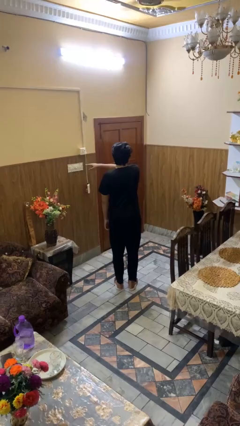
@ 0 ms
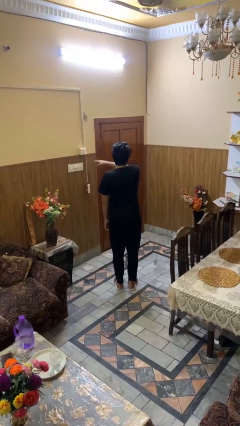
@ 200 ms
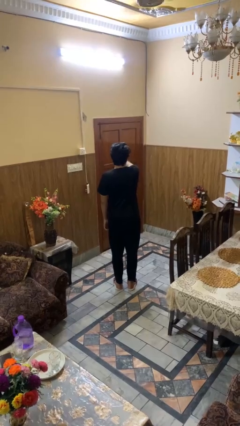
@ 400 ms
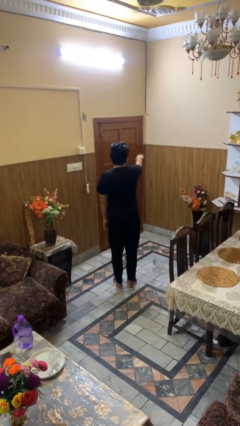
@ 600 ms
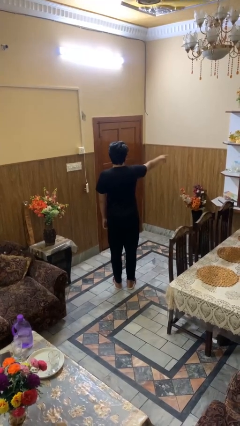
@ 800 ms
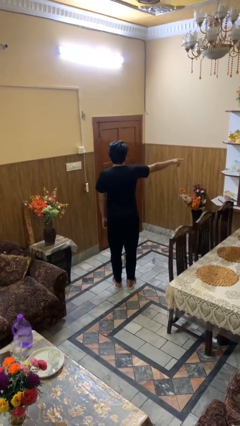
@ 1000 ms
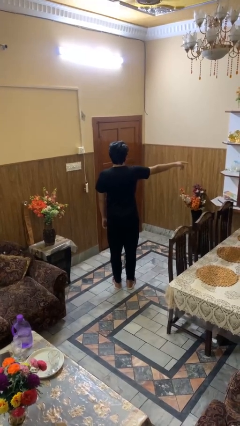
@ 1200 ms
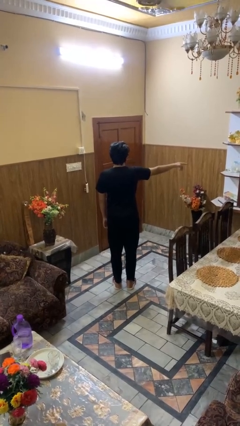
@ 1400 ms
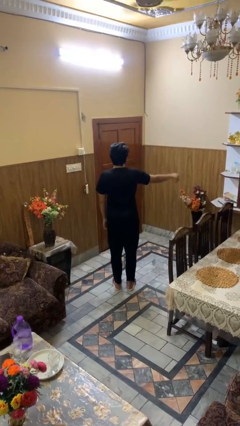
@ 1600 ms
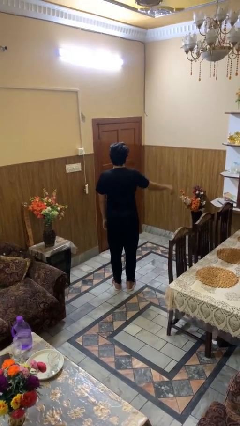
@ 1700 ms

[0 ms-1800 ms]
person gestures swipe right

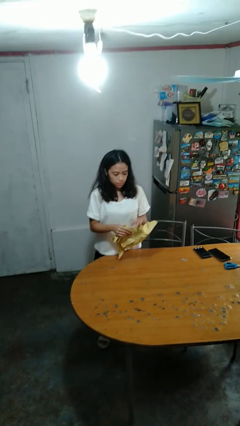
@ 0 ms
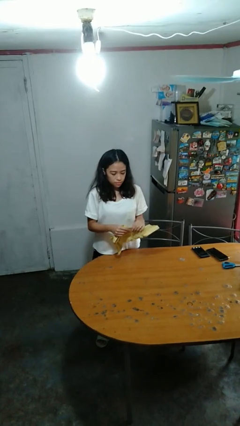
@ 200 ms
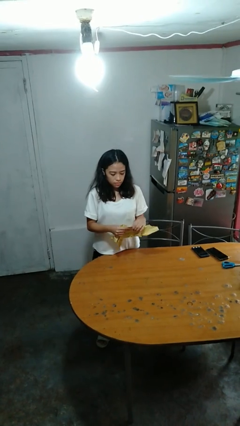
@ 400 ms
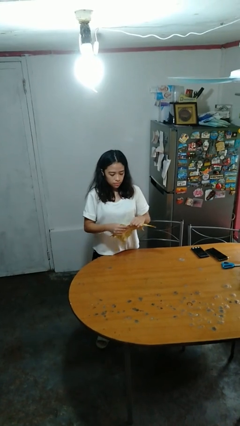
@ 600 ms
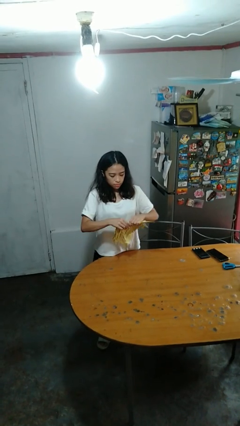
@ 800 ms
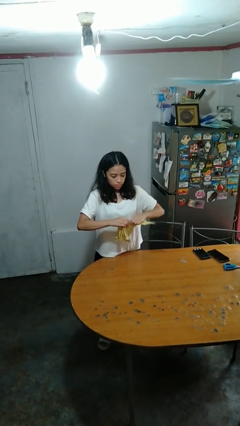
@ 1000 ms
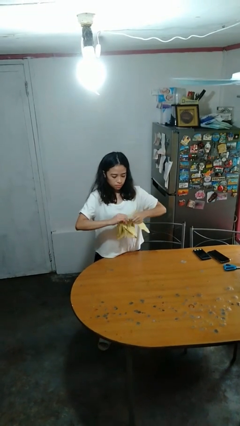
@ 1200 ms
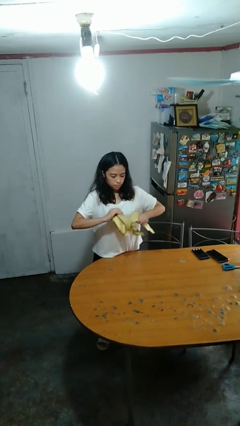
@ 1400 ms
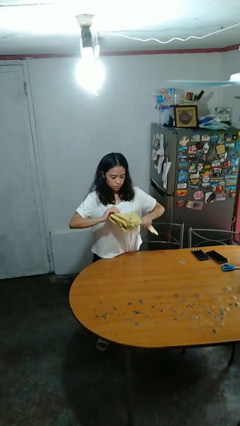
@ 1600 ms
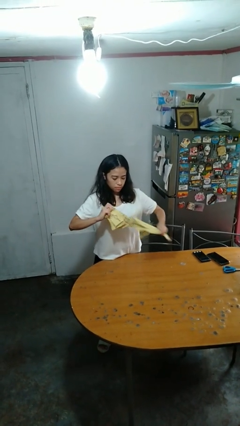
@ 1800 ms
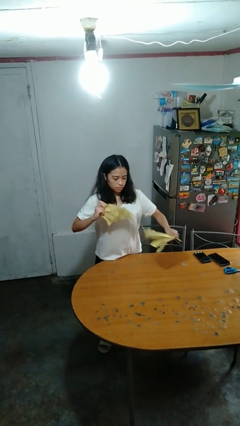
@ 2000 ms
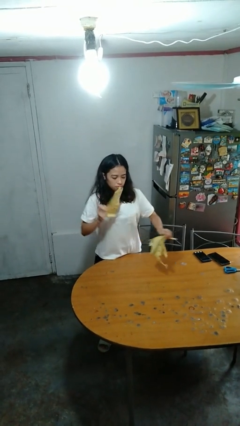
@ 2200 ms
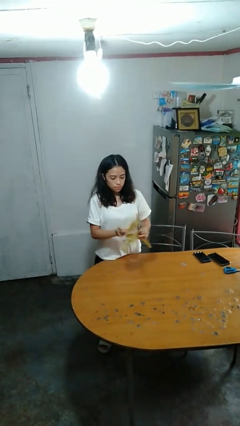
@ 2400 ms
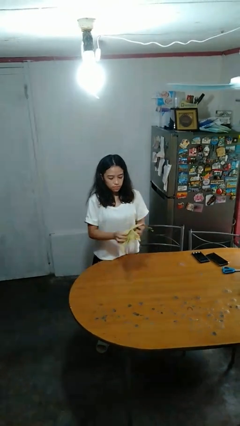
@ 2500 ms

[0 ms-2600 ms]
person tears paper

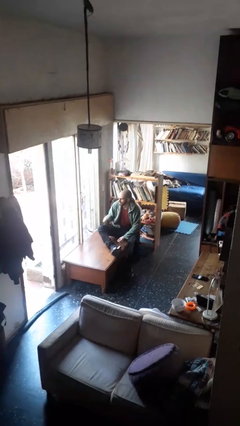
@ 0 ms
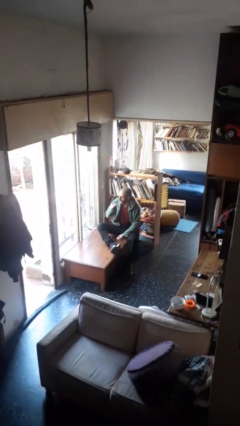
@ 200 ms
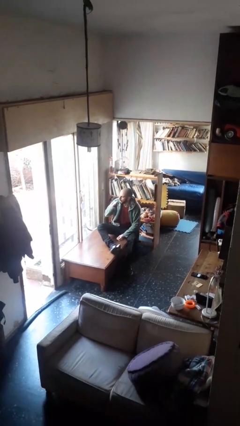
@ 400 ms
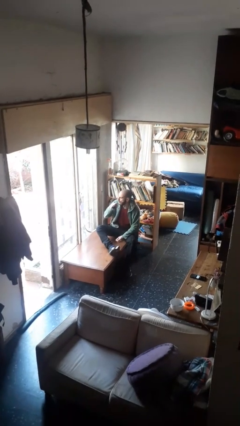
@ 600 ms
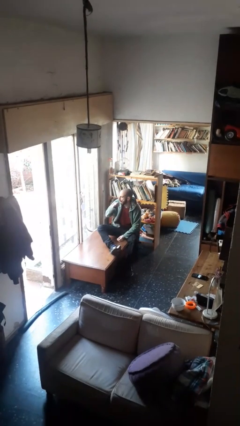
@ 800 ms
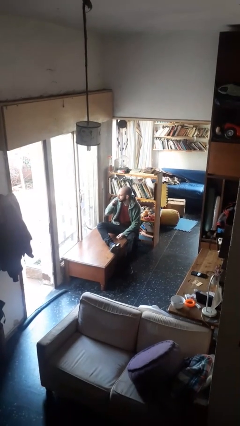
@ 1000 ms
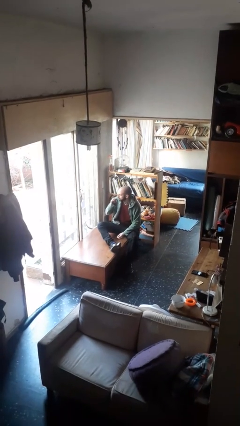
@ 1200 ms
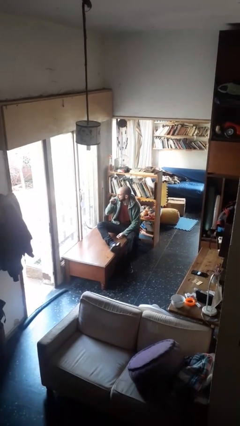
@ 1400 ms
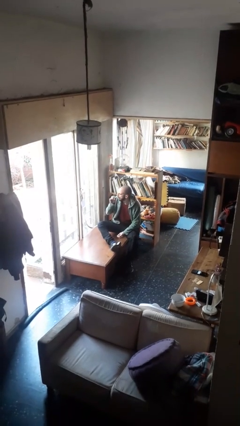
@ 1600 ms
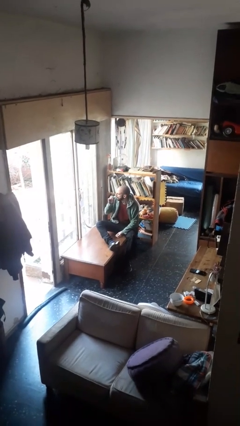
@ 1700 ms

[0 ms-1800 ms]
person brushes teeth

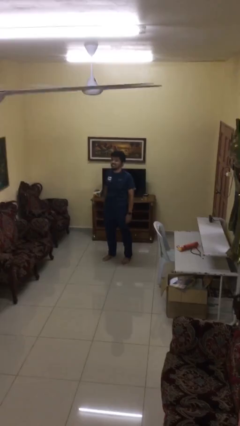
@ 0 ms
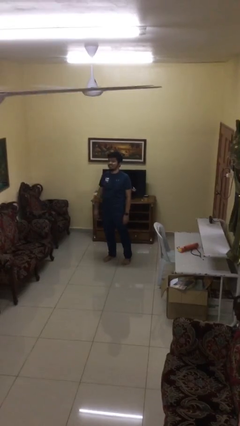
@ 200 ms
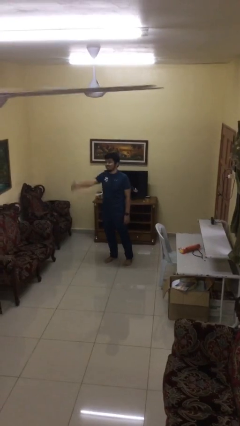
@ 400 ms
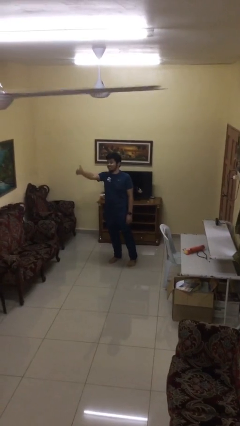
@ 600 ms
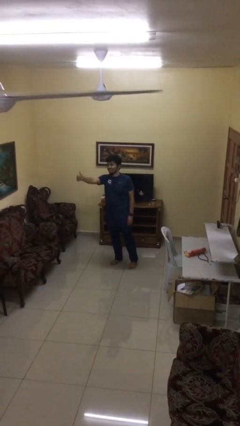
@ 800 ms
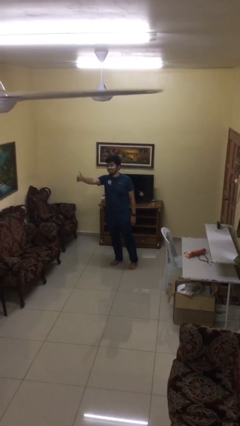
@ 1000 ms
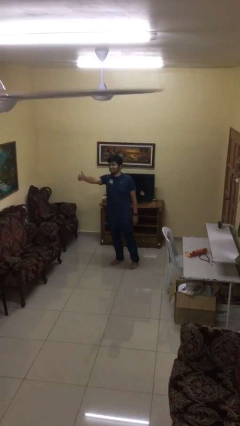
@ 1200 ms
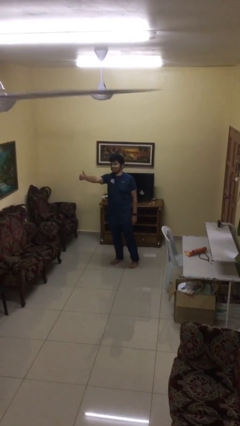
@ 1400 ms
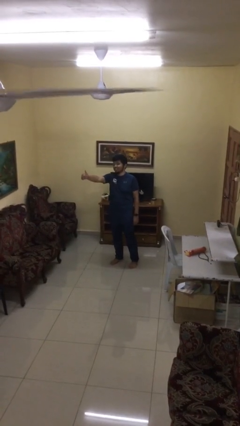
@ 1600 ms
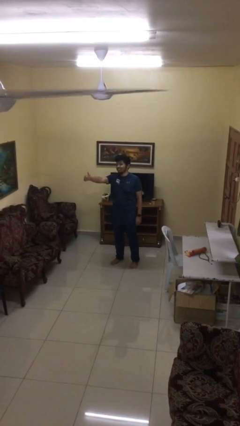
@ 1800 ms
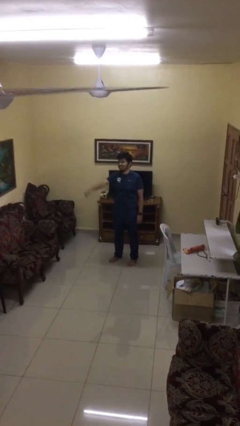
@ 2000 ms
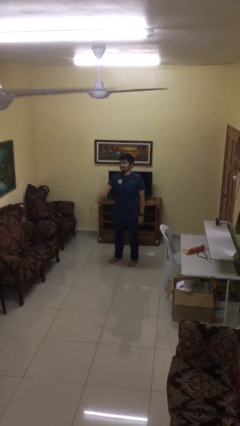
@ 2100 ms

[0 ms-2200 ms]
person gestures thumbs up

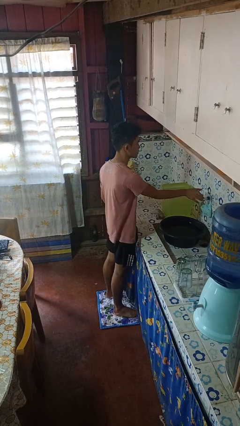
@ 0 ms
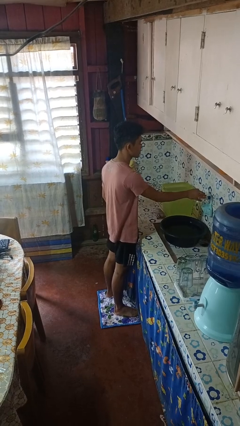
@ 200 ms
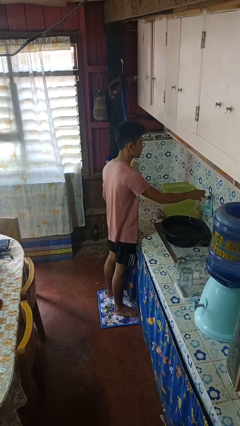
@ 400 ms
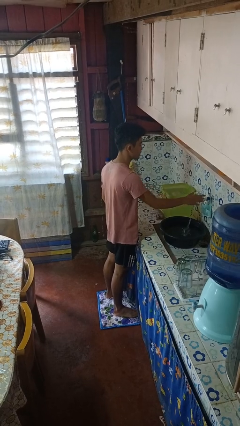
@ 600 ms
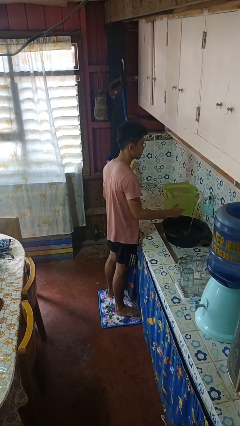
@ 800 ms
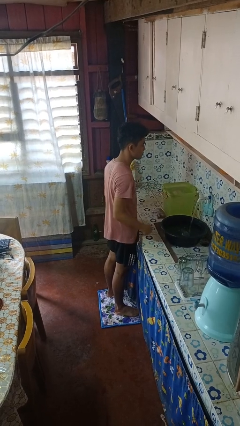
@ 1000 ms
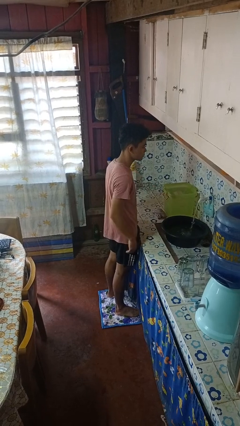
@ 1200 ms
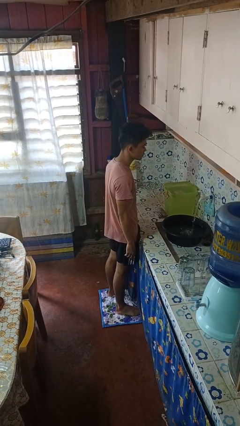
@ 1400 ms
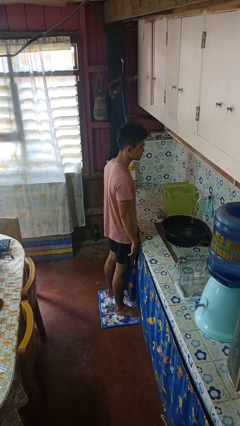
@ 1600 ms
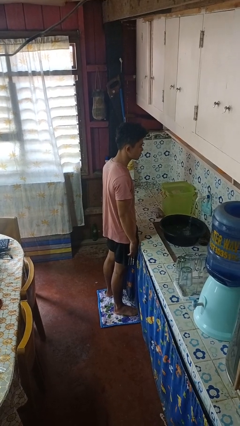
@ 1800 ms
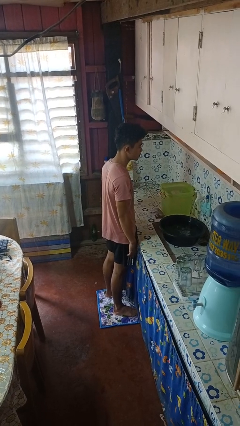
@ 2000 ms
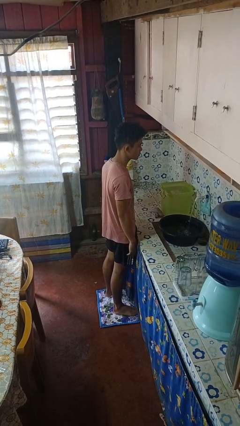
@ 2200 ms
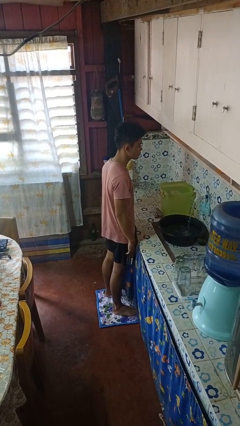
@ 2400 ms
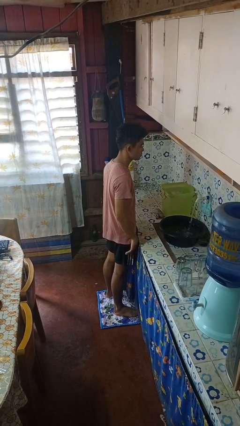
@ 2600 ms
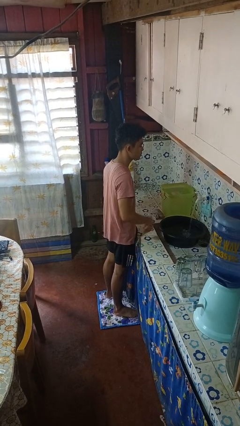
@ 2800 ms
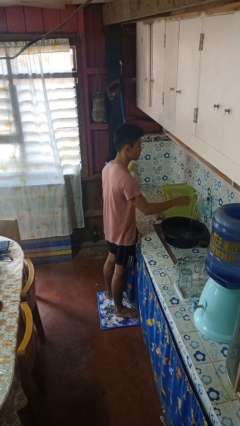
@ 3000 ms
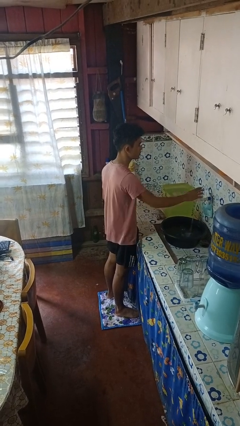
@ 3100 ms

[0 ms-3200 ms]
person turns on faucet

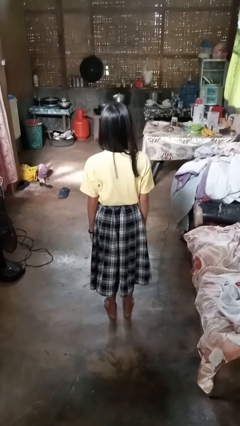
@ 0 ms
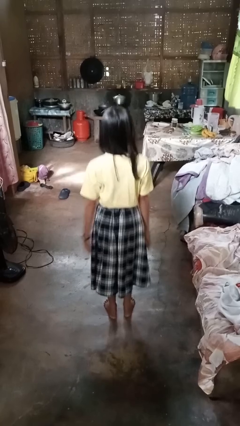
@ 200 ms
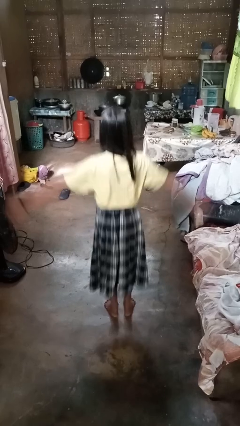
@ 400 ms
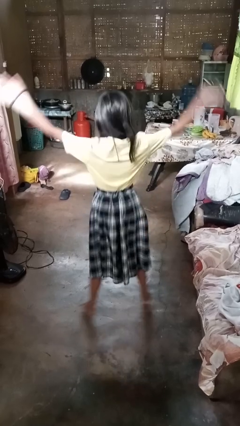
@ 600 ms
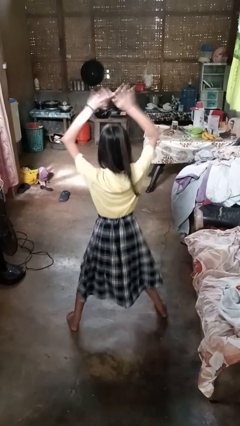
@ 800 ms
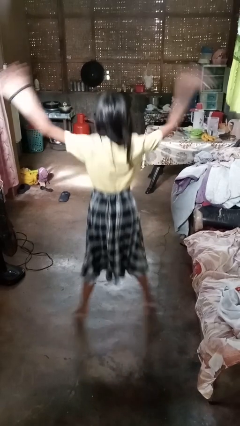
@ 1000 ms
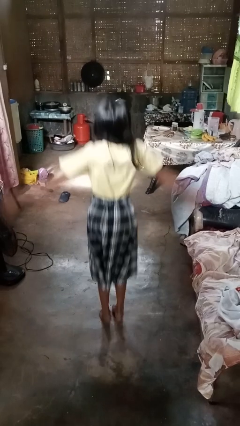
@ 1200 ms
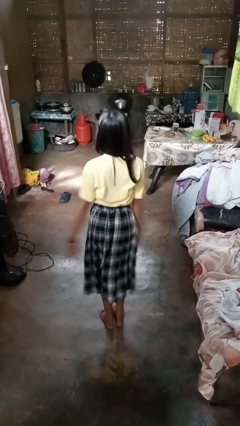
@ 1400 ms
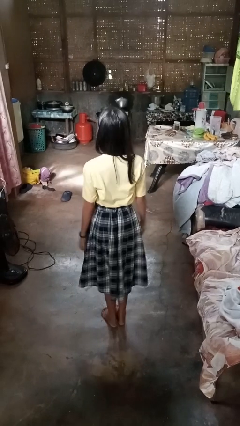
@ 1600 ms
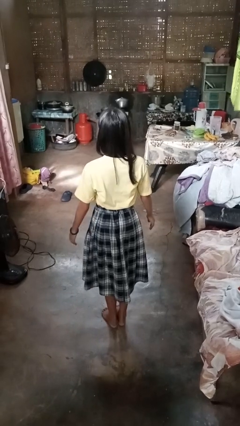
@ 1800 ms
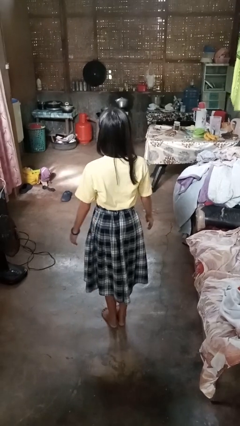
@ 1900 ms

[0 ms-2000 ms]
person exercises with jumping jacks

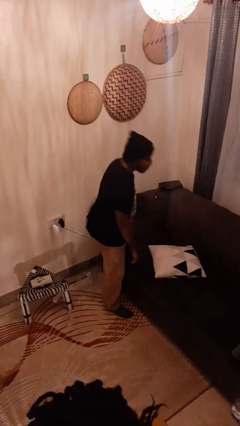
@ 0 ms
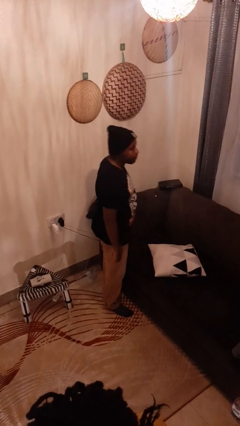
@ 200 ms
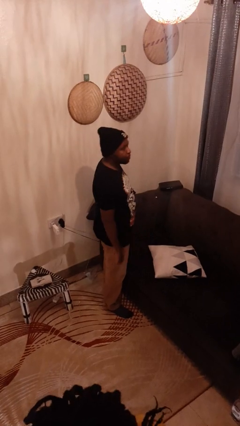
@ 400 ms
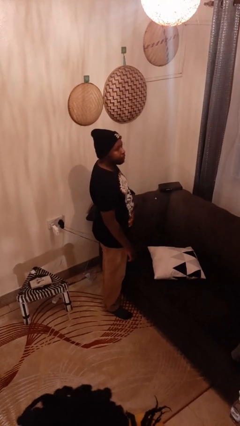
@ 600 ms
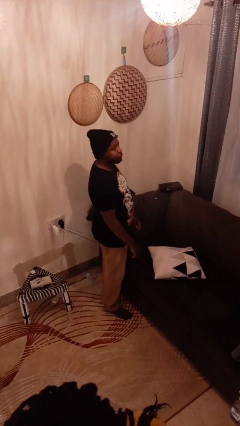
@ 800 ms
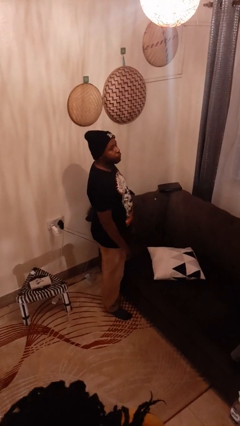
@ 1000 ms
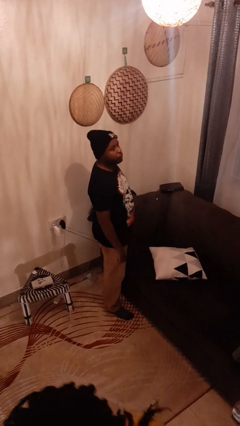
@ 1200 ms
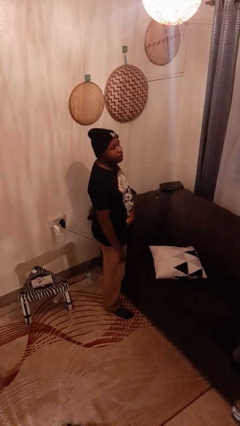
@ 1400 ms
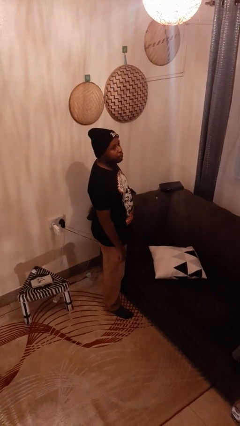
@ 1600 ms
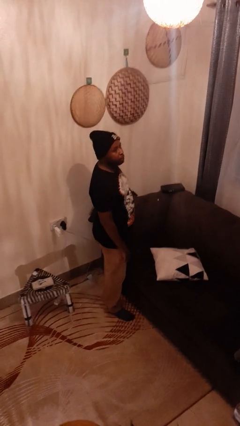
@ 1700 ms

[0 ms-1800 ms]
person puts down object on couch

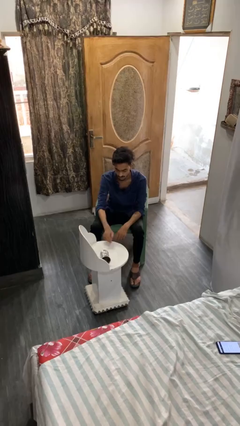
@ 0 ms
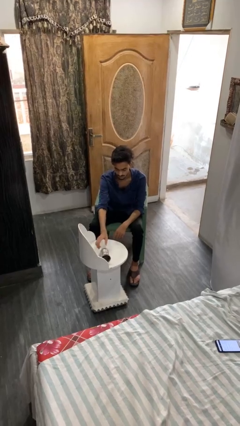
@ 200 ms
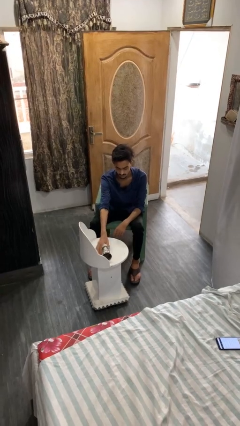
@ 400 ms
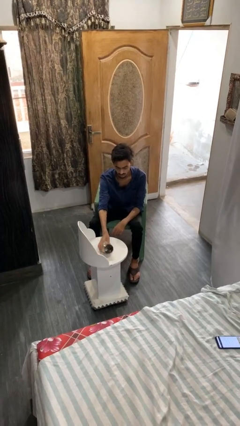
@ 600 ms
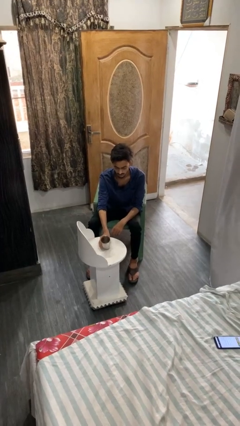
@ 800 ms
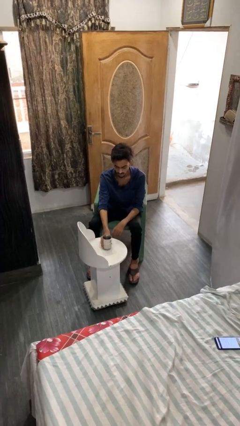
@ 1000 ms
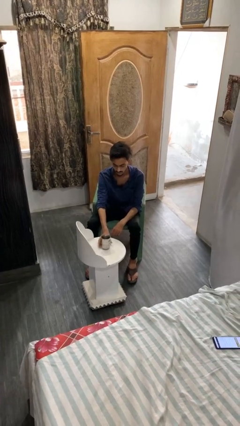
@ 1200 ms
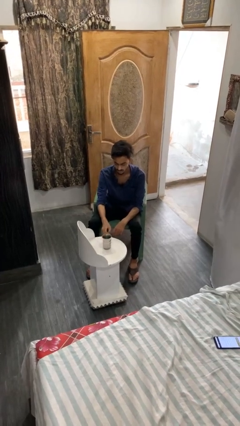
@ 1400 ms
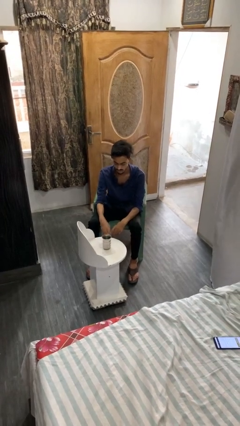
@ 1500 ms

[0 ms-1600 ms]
person sets upright glass
